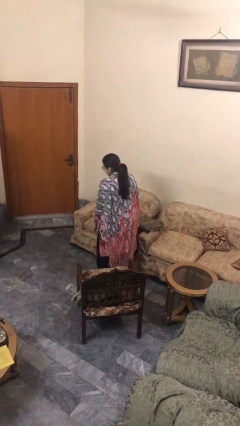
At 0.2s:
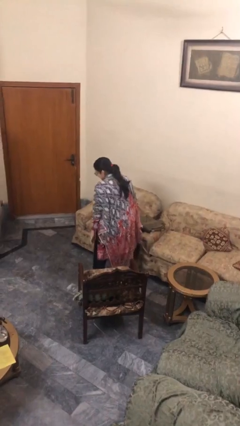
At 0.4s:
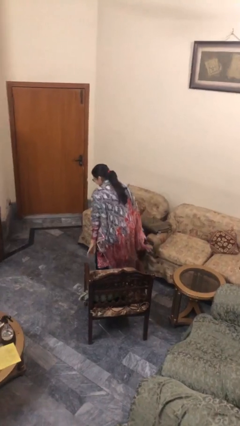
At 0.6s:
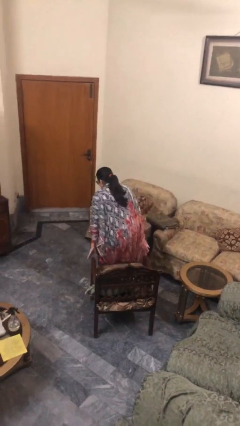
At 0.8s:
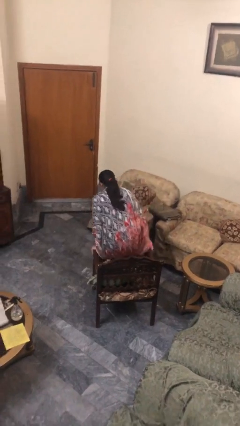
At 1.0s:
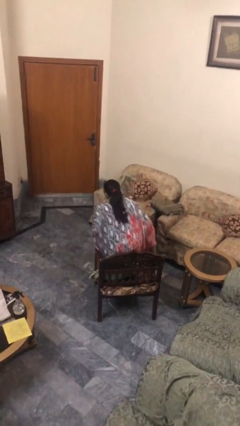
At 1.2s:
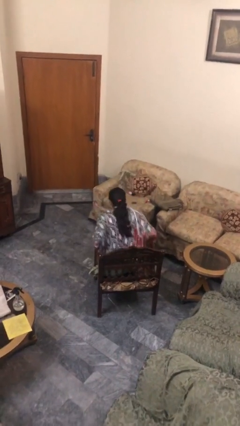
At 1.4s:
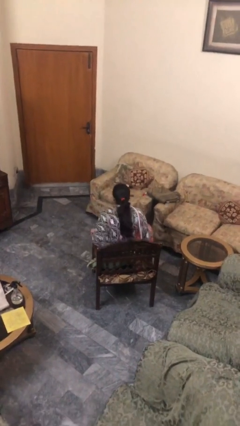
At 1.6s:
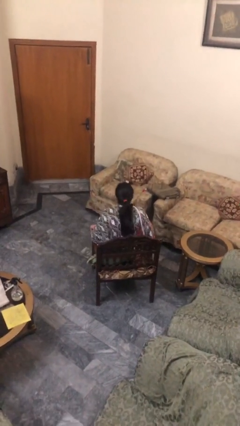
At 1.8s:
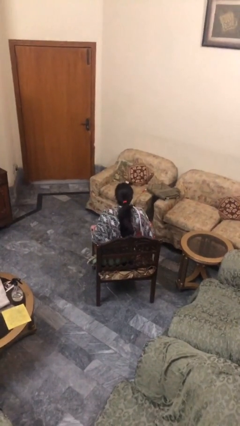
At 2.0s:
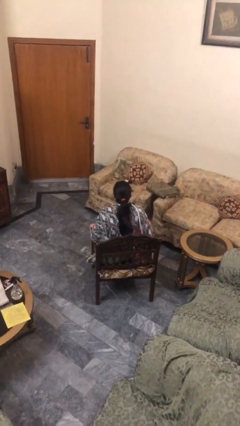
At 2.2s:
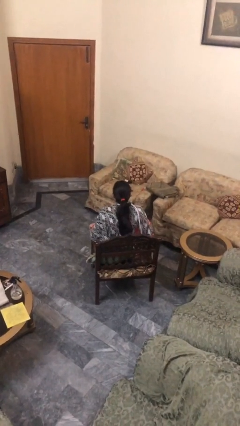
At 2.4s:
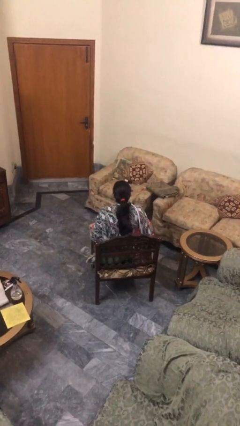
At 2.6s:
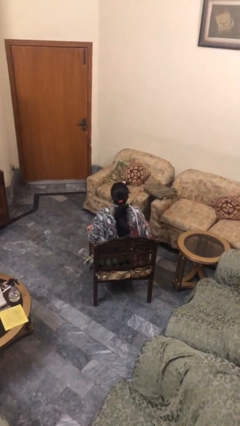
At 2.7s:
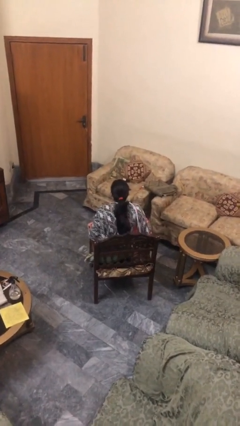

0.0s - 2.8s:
person sits down

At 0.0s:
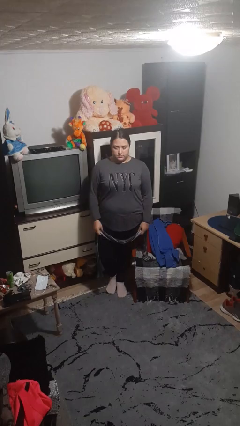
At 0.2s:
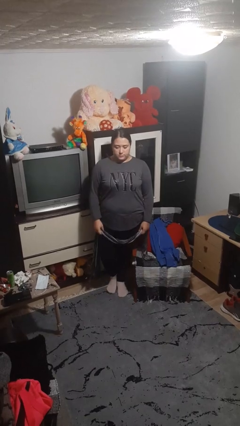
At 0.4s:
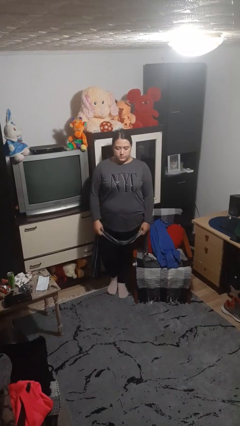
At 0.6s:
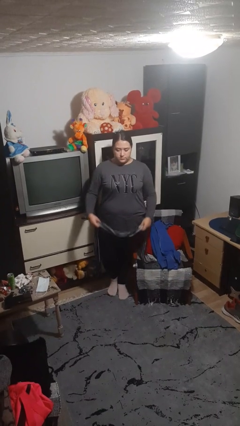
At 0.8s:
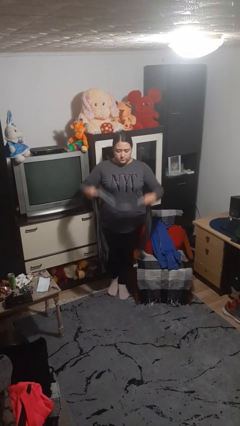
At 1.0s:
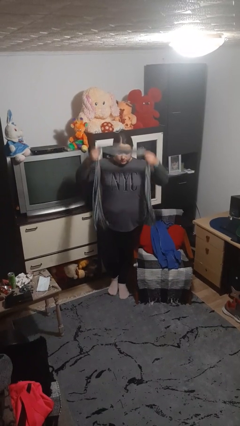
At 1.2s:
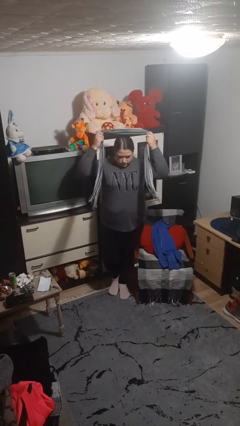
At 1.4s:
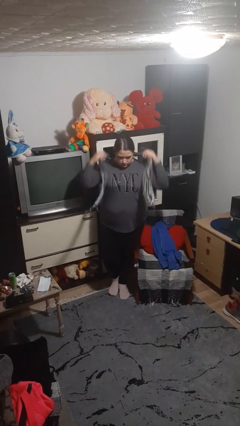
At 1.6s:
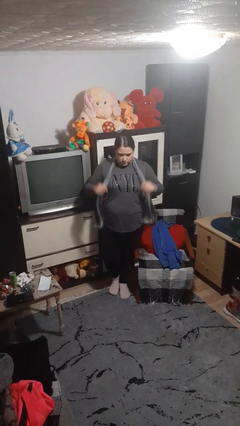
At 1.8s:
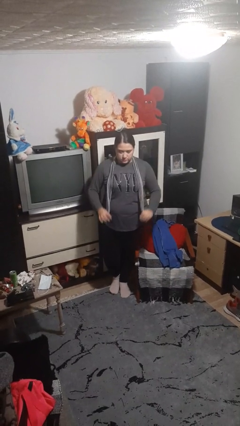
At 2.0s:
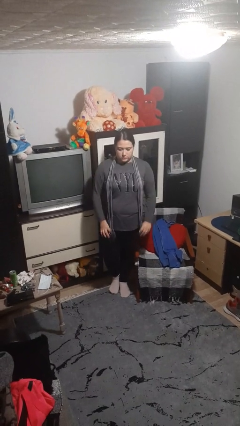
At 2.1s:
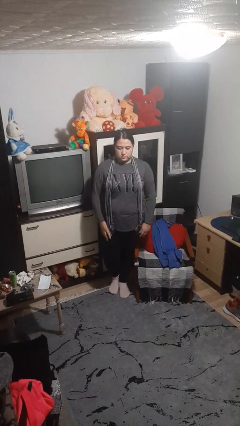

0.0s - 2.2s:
person puts on scarf

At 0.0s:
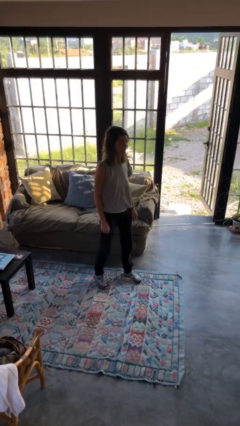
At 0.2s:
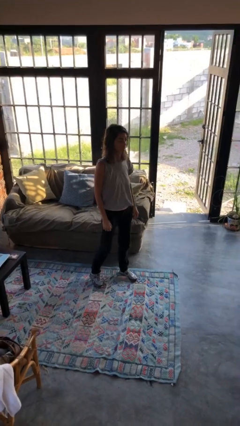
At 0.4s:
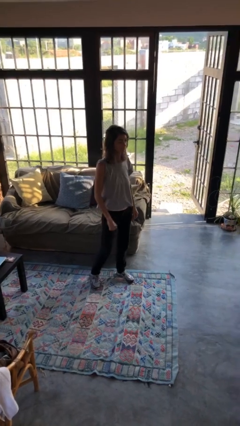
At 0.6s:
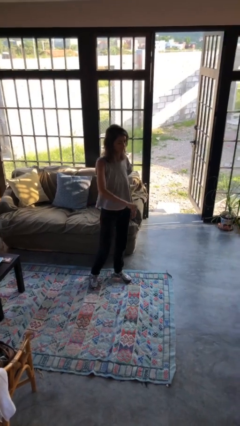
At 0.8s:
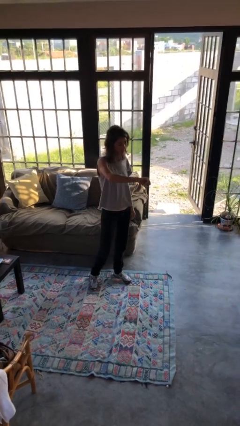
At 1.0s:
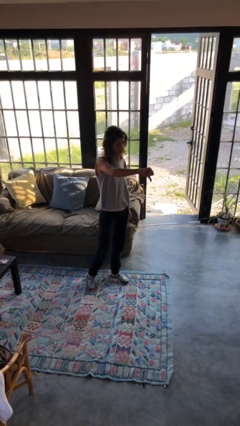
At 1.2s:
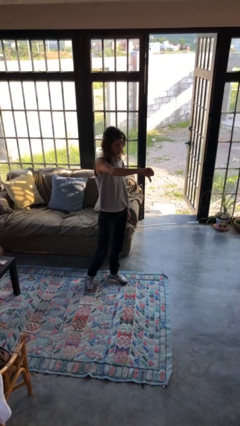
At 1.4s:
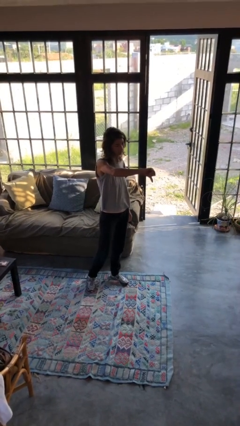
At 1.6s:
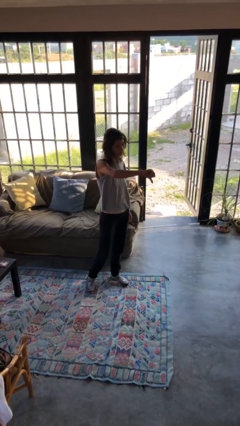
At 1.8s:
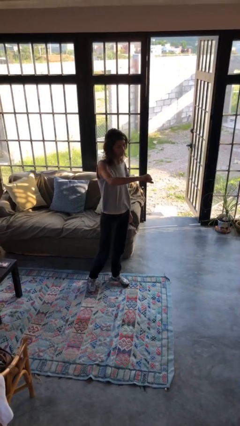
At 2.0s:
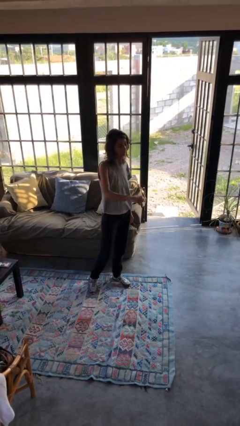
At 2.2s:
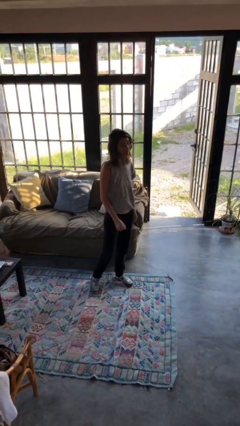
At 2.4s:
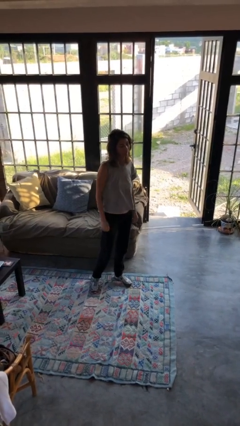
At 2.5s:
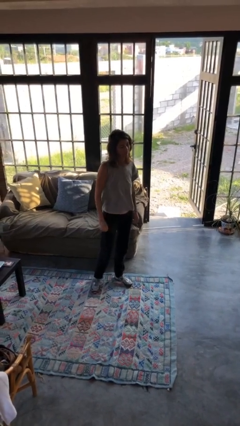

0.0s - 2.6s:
person gestures thumbs down

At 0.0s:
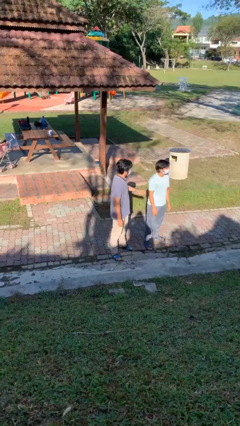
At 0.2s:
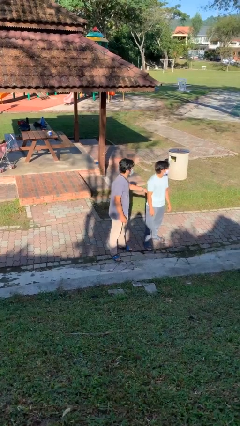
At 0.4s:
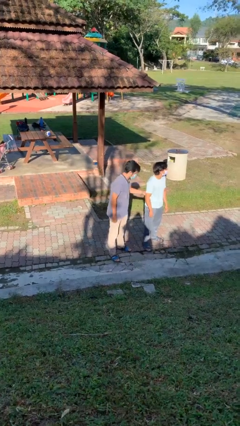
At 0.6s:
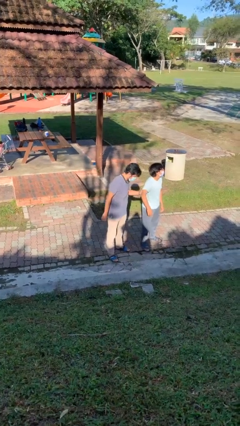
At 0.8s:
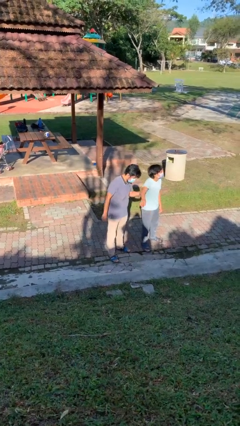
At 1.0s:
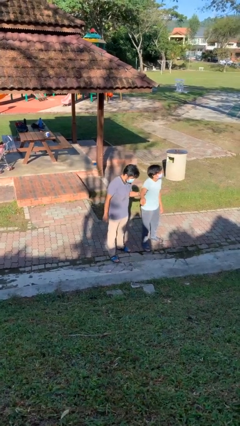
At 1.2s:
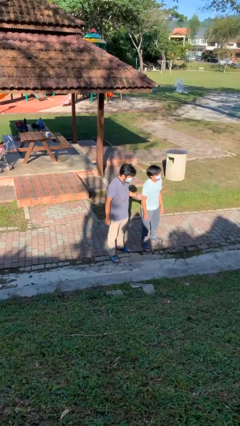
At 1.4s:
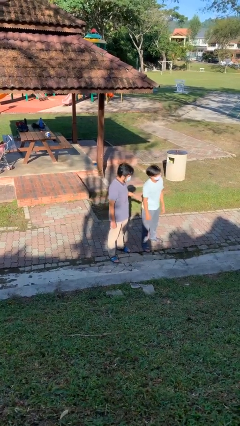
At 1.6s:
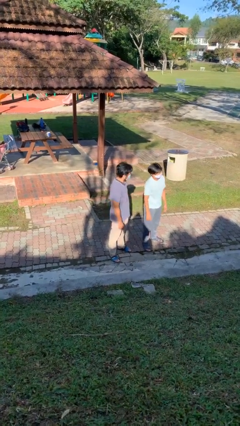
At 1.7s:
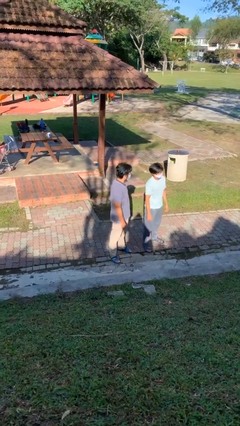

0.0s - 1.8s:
person grabs person by bicep

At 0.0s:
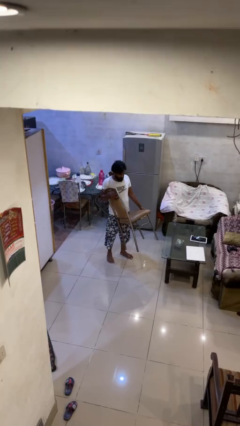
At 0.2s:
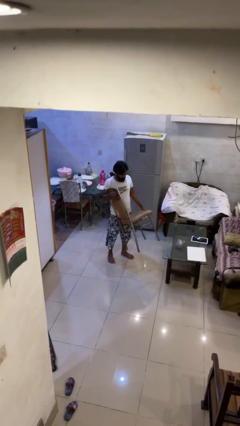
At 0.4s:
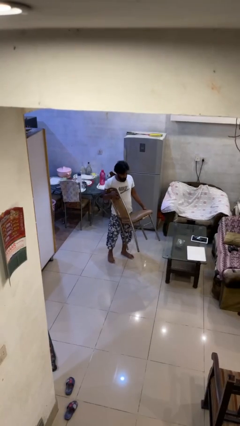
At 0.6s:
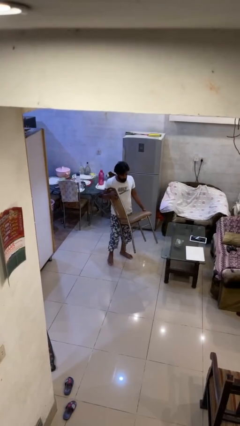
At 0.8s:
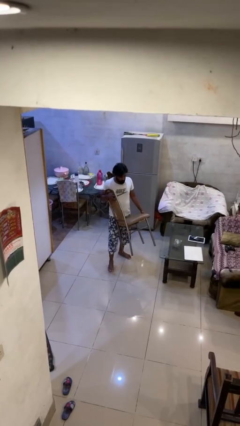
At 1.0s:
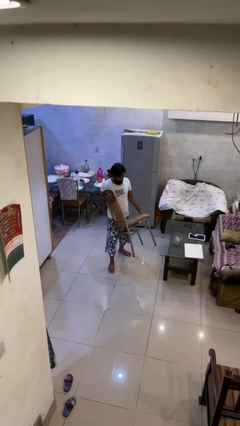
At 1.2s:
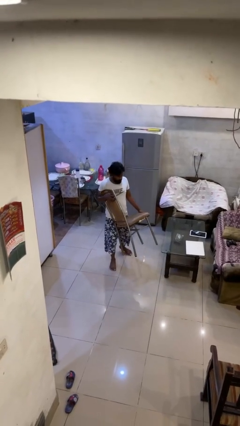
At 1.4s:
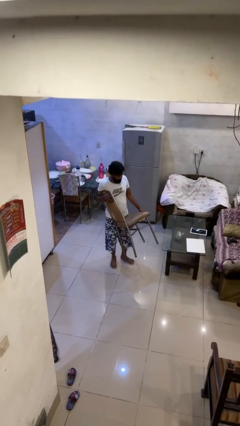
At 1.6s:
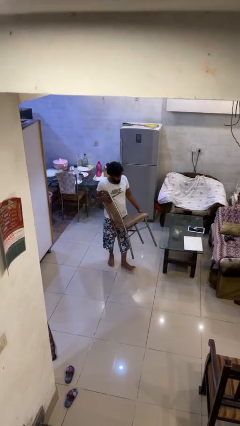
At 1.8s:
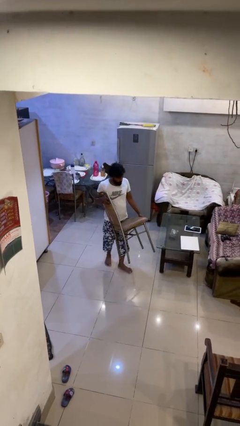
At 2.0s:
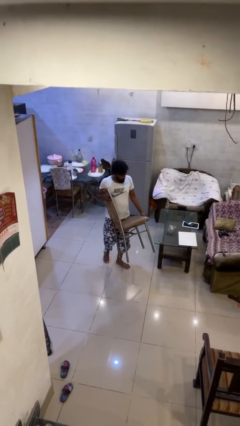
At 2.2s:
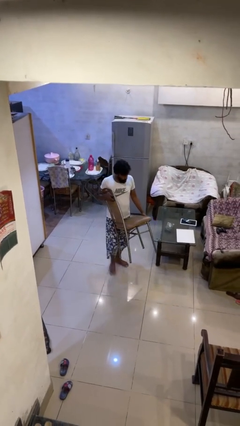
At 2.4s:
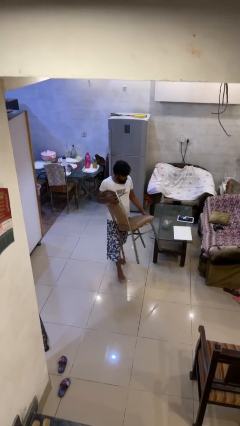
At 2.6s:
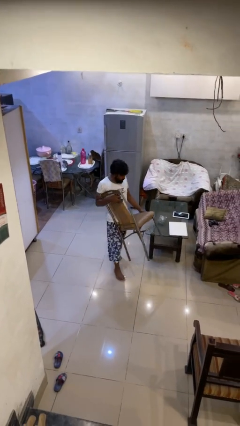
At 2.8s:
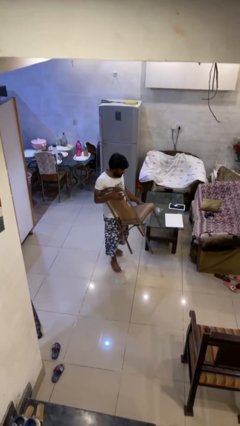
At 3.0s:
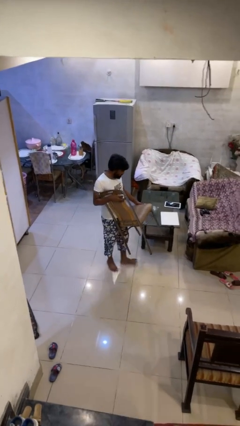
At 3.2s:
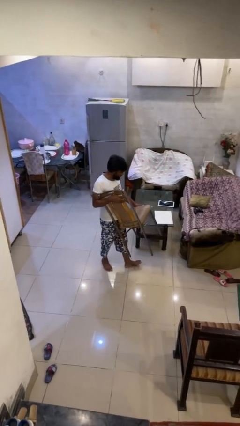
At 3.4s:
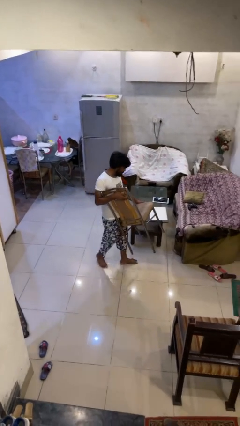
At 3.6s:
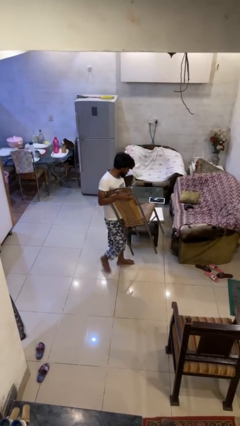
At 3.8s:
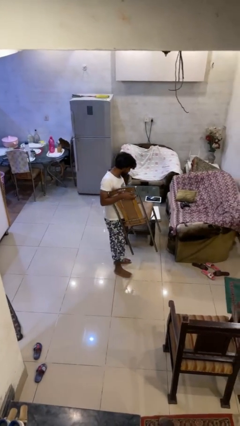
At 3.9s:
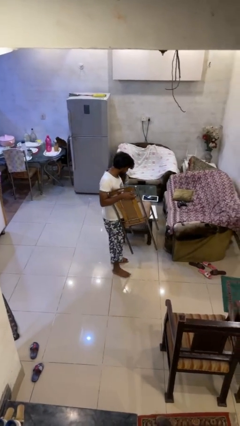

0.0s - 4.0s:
person carries furniture

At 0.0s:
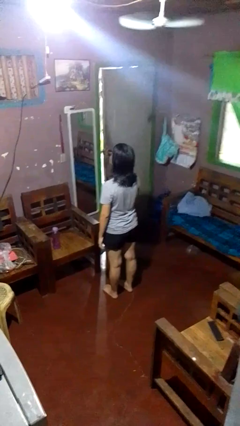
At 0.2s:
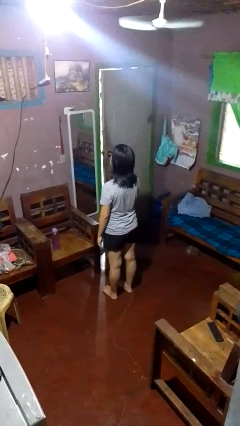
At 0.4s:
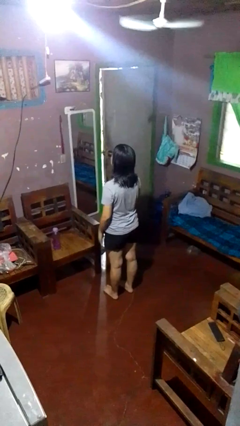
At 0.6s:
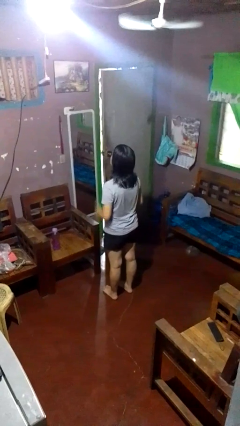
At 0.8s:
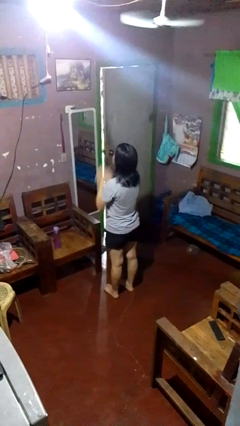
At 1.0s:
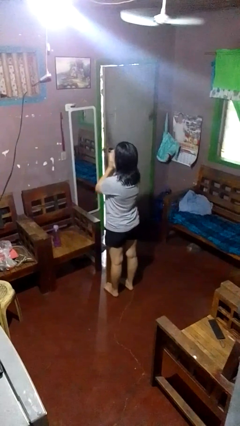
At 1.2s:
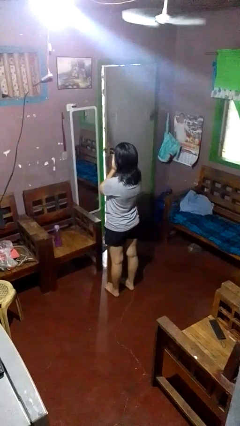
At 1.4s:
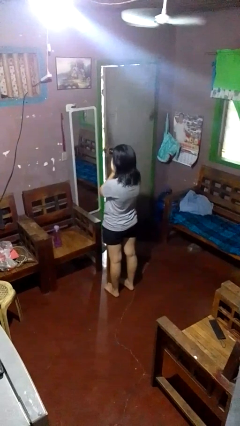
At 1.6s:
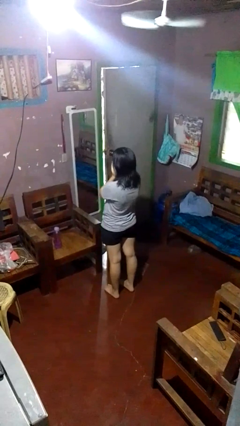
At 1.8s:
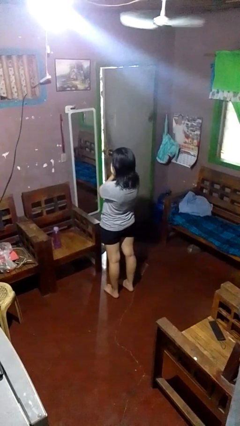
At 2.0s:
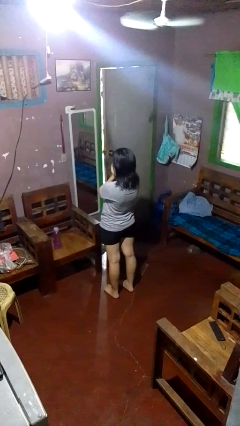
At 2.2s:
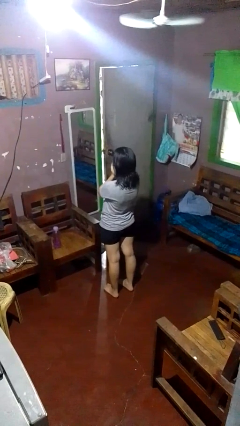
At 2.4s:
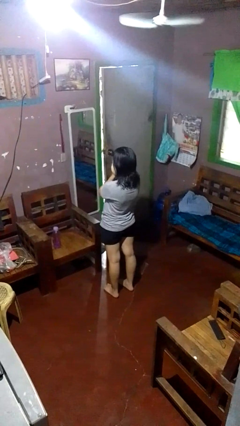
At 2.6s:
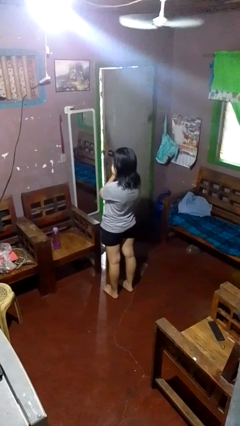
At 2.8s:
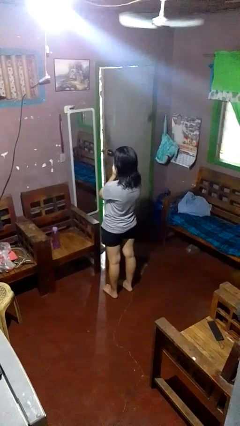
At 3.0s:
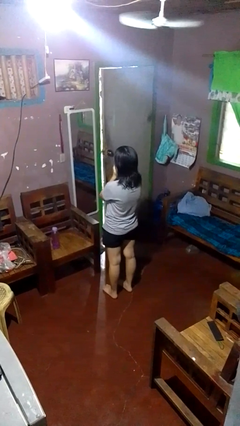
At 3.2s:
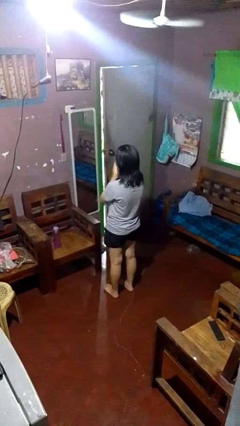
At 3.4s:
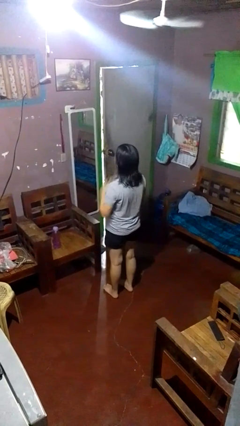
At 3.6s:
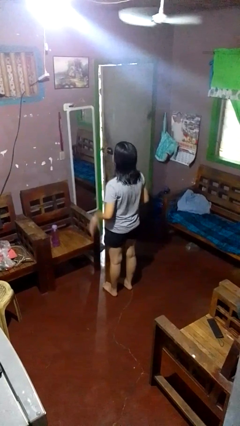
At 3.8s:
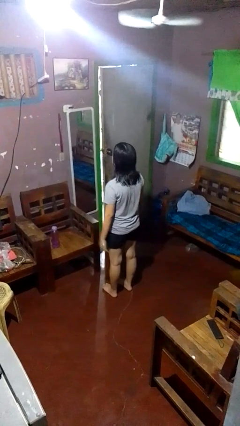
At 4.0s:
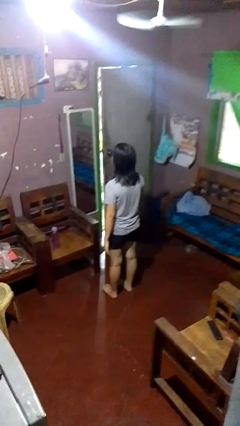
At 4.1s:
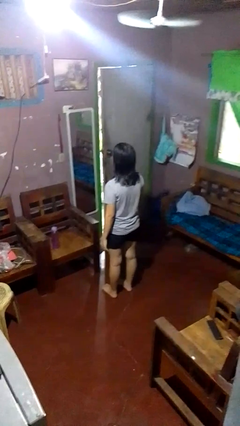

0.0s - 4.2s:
person covers face with hands
